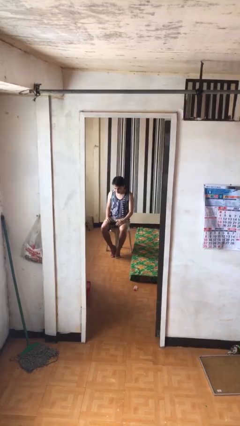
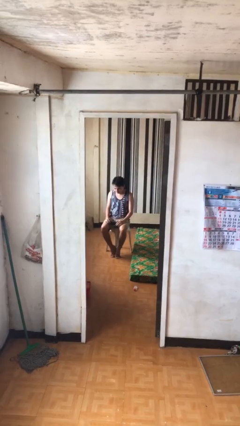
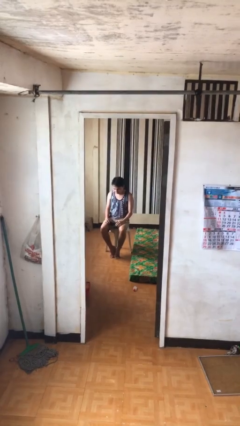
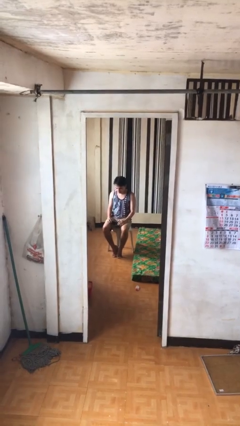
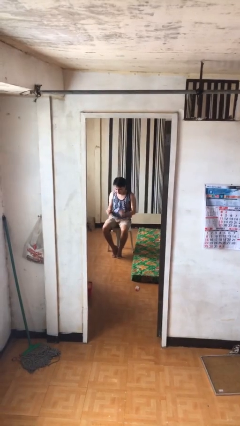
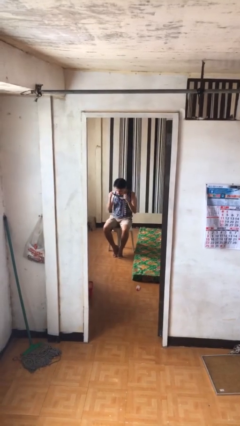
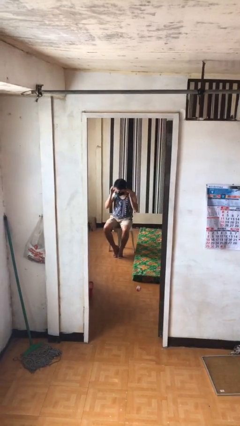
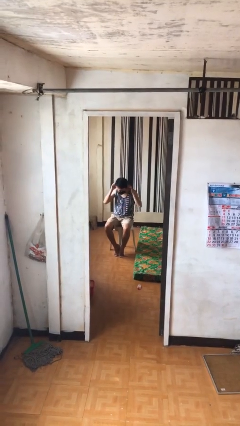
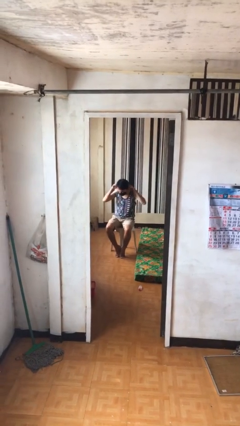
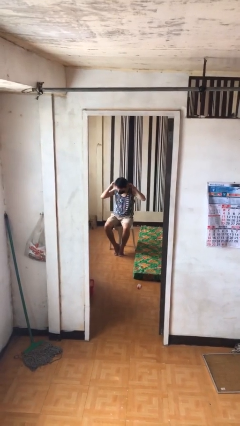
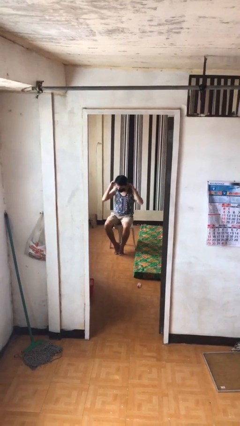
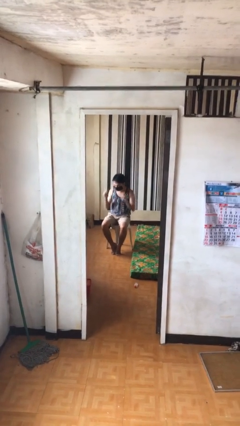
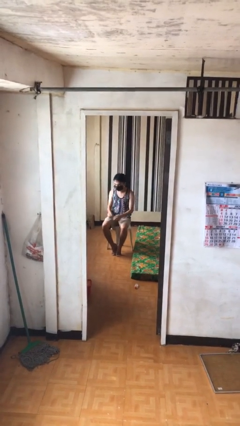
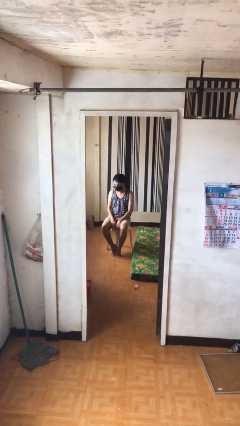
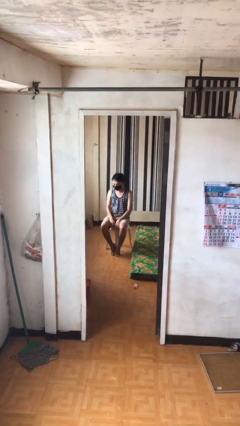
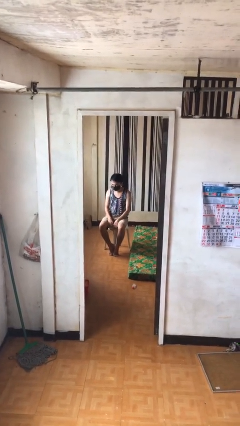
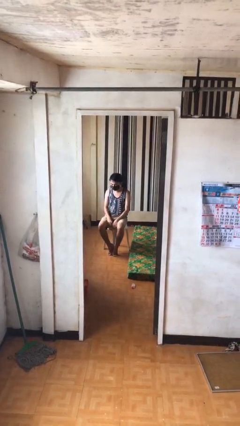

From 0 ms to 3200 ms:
person puts on facemask

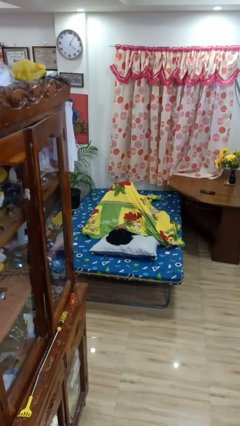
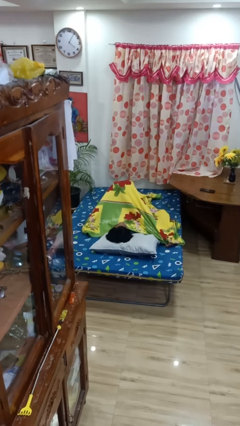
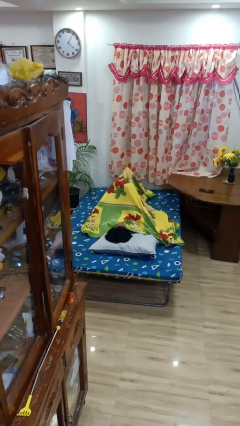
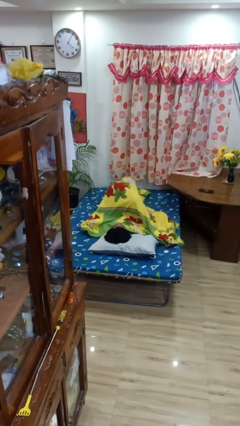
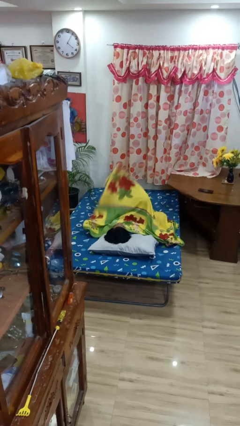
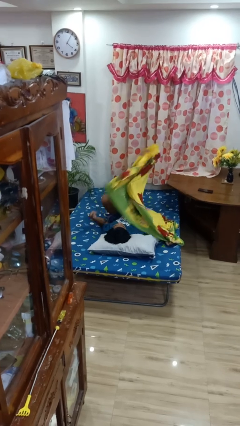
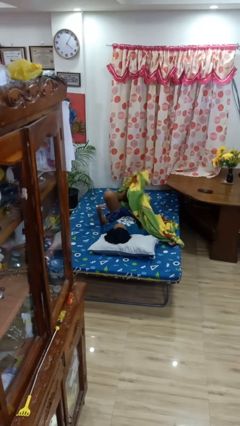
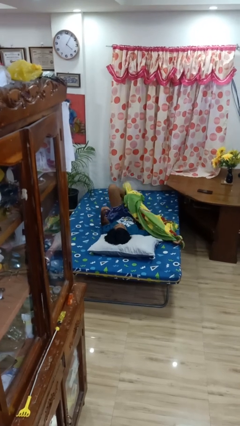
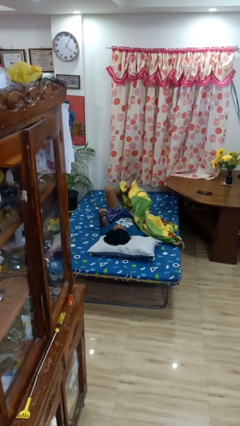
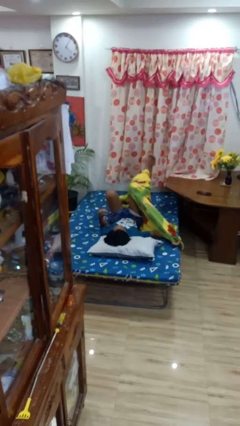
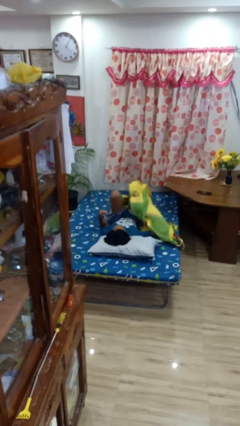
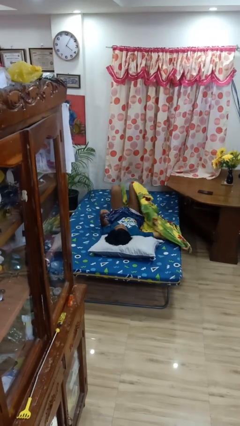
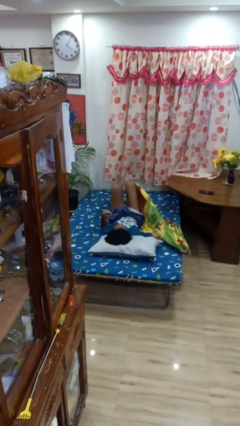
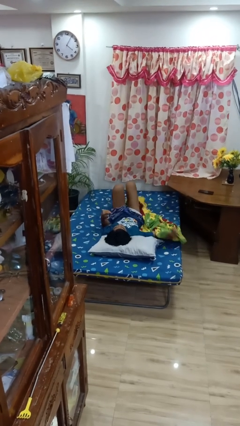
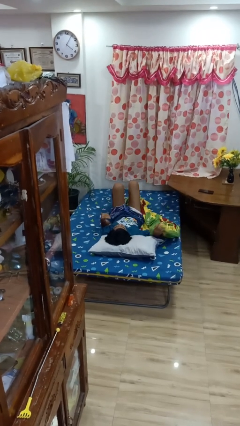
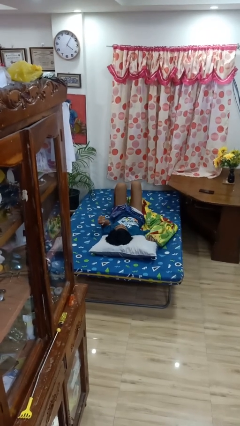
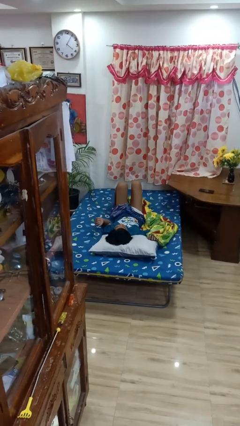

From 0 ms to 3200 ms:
person uncovers with bedsheets

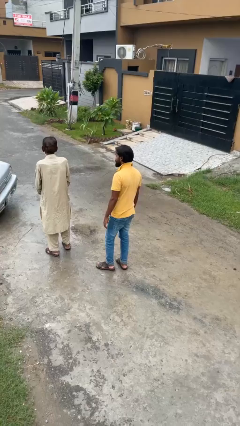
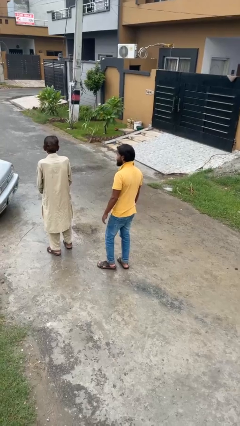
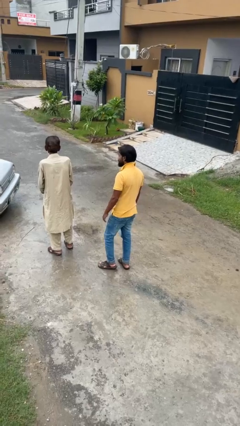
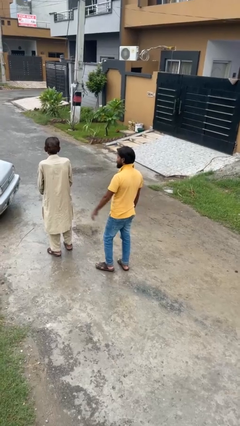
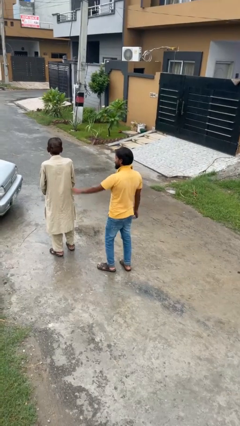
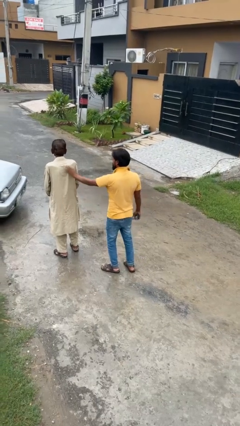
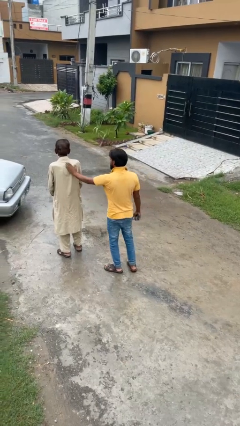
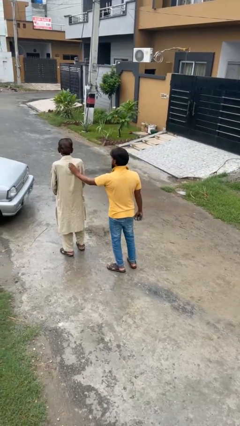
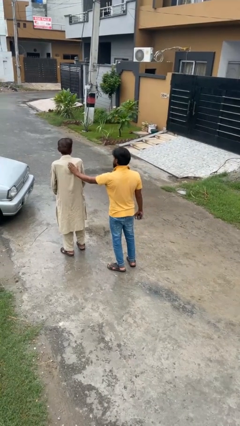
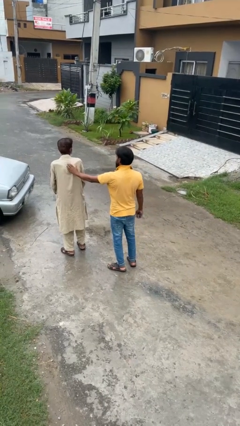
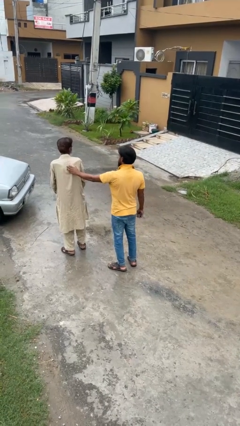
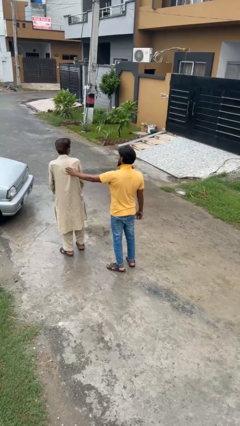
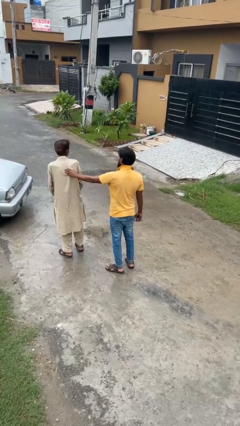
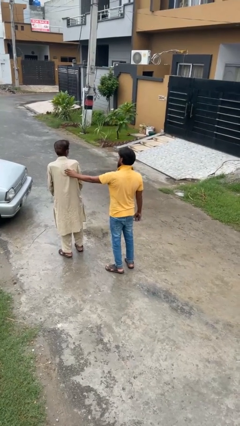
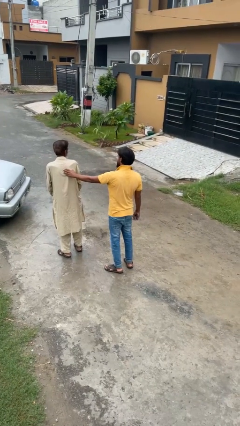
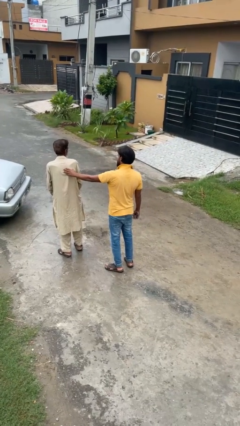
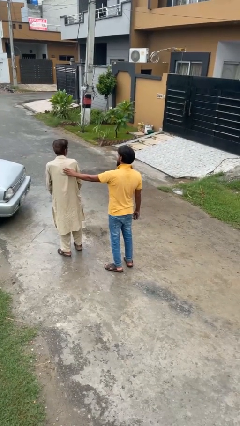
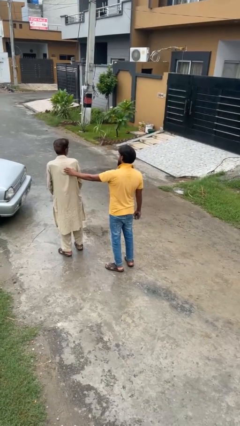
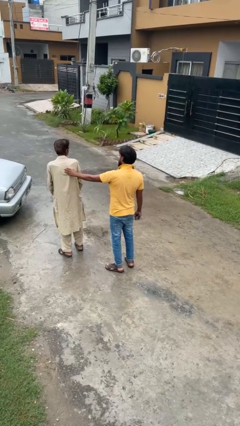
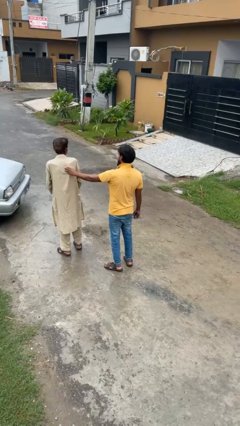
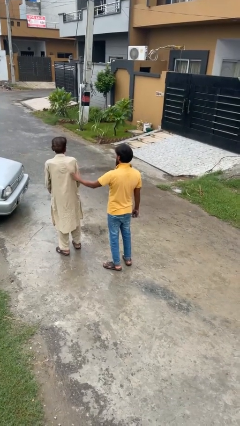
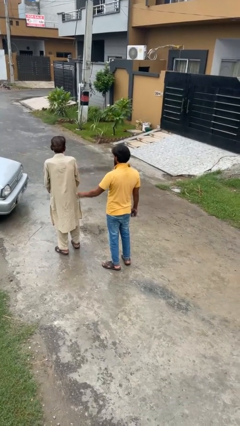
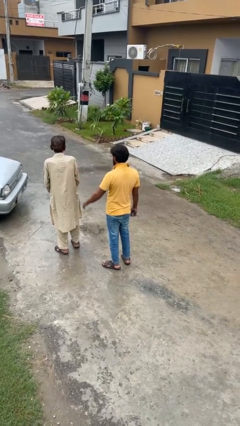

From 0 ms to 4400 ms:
person touches back of person

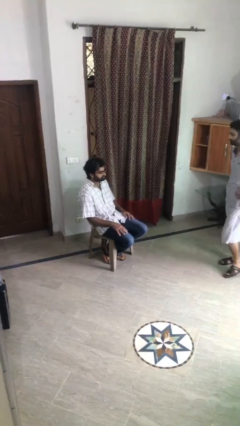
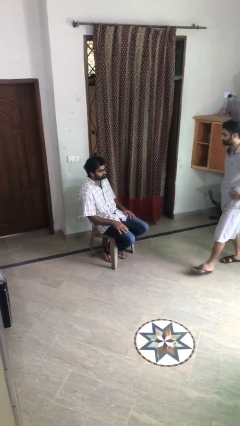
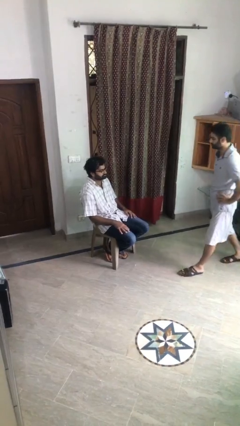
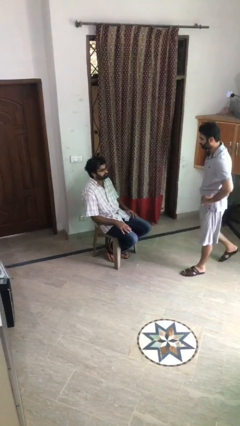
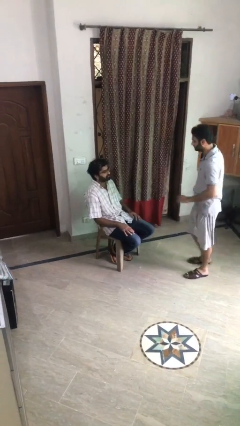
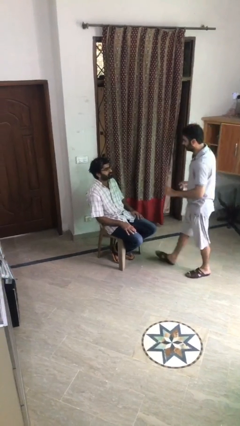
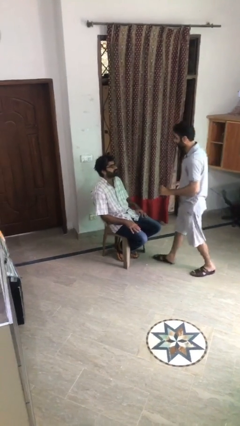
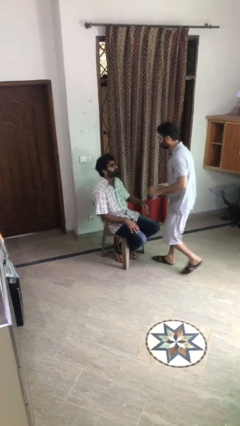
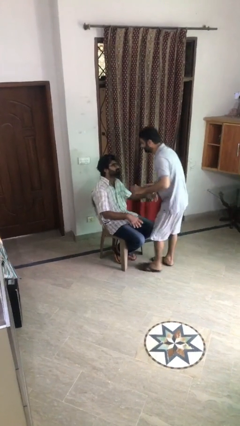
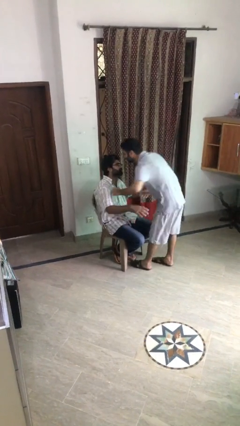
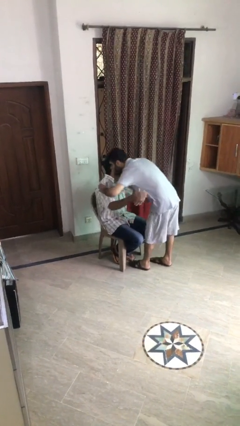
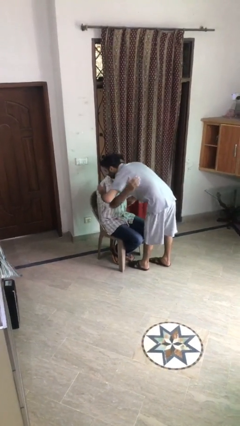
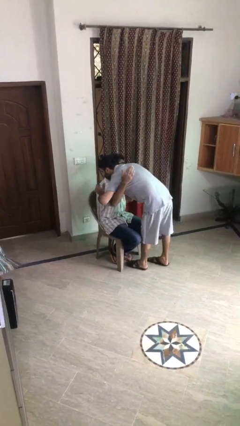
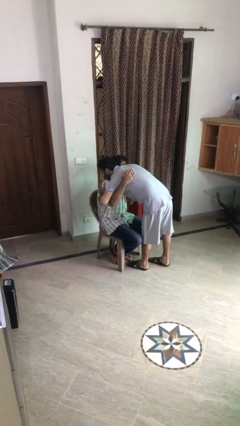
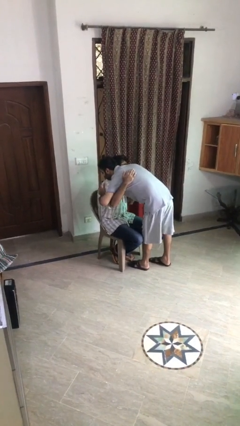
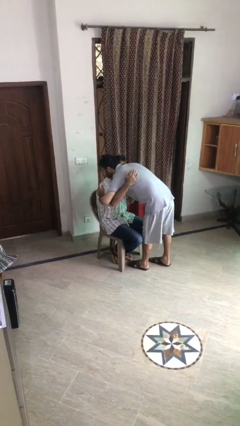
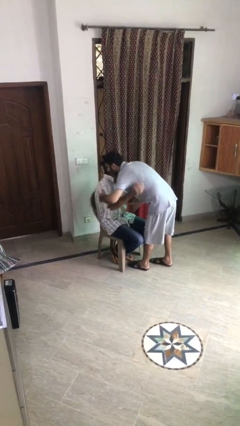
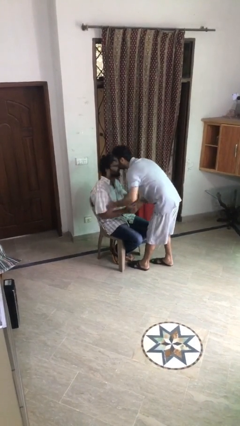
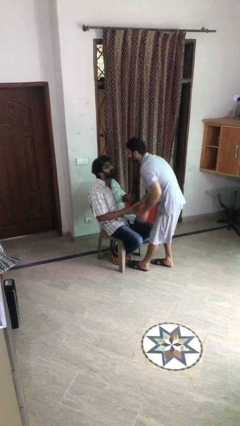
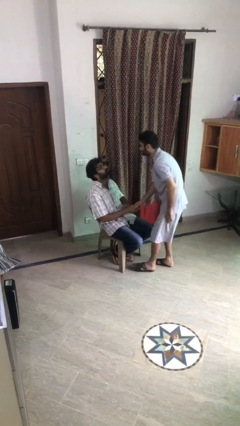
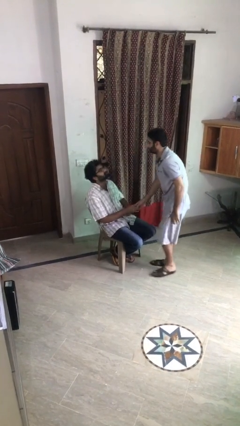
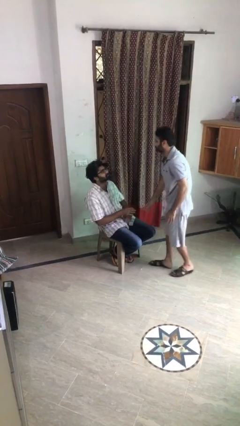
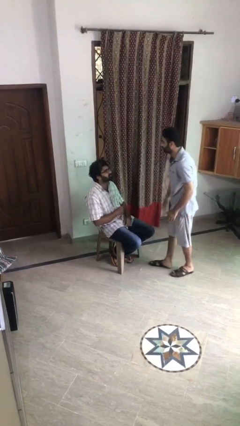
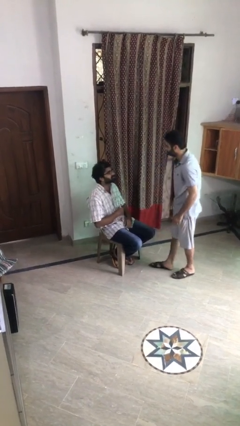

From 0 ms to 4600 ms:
person embraces person

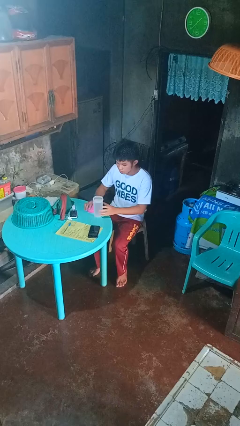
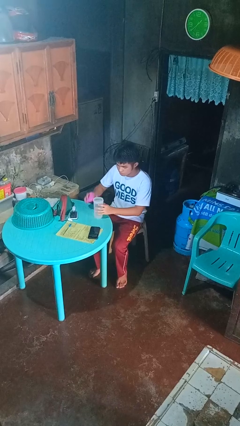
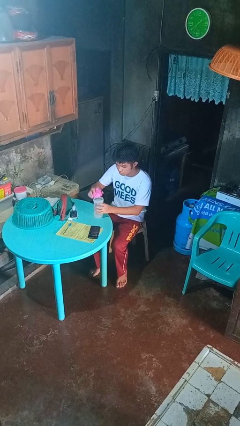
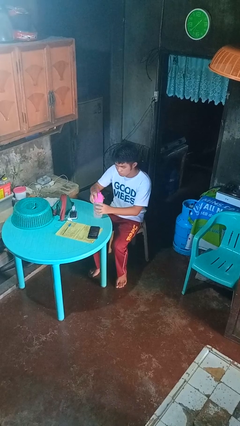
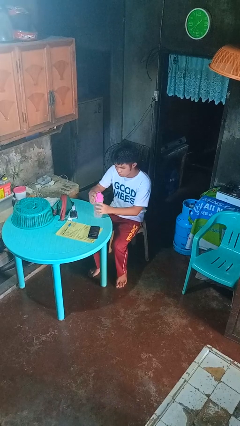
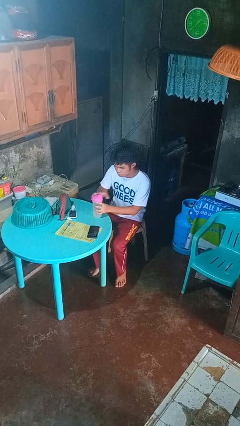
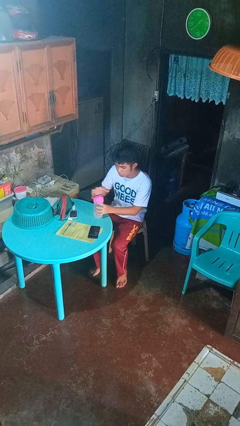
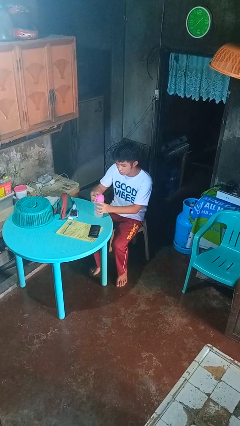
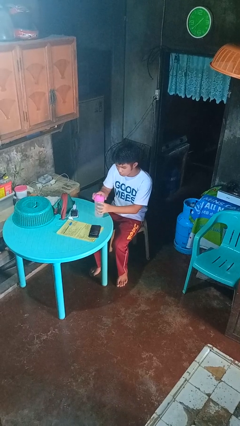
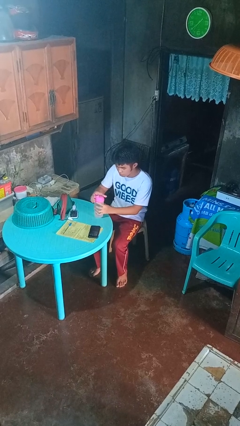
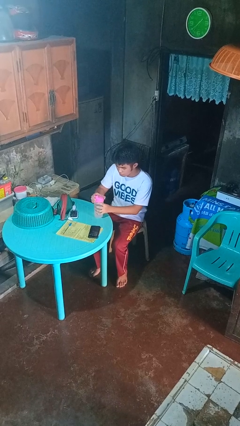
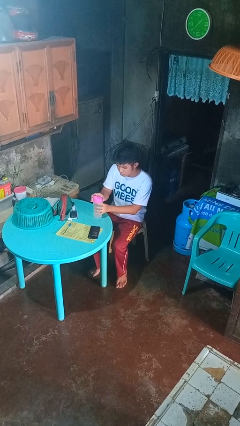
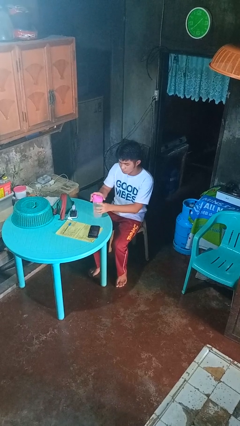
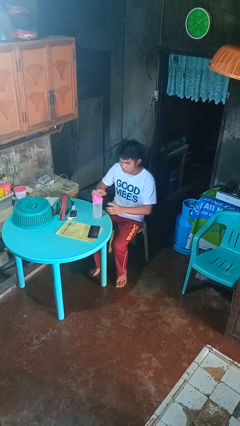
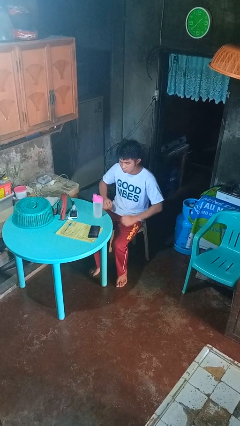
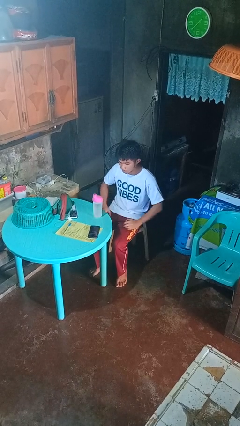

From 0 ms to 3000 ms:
person screws lid to bottle
